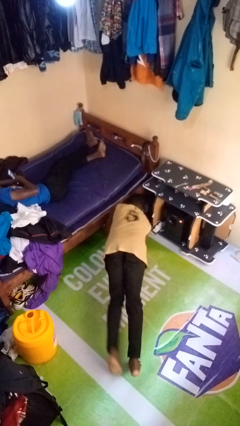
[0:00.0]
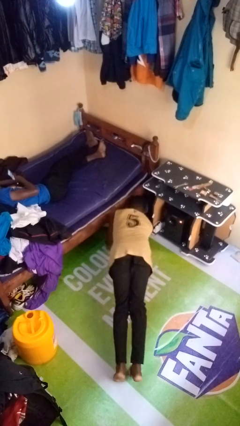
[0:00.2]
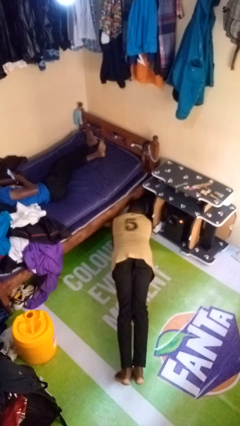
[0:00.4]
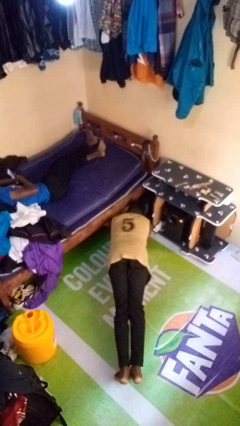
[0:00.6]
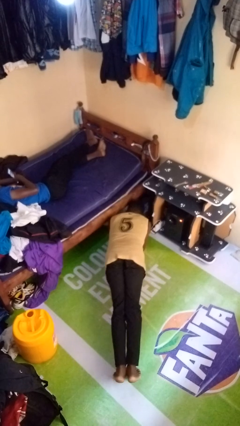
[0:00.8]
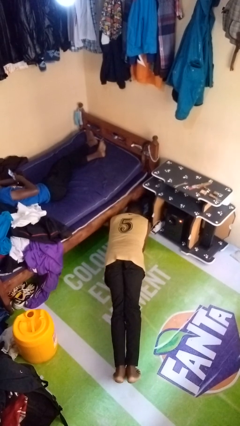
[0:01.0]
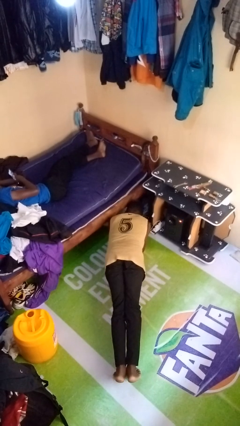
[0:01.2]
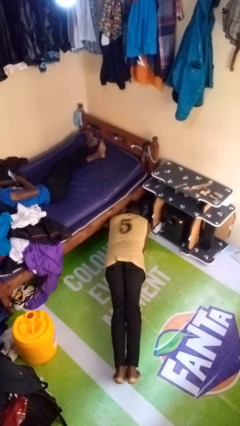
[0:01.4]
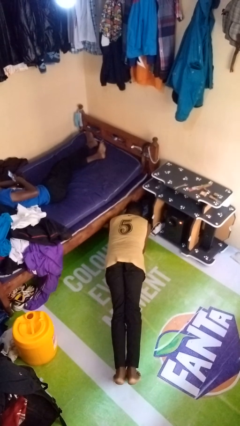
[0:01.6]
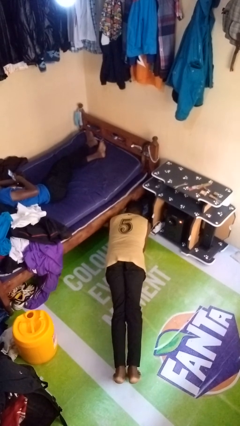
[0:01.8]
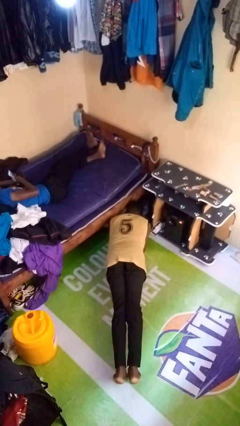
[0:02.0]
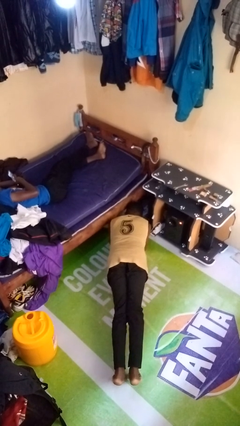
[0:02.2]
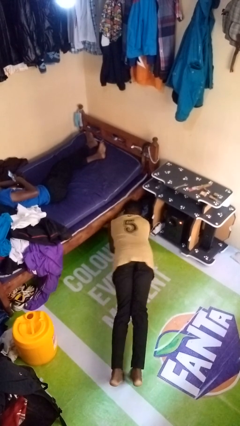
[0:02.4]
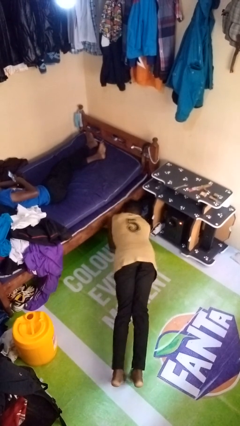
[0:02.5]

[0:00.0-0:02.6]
person exercises with plank

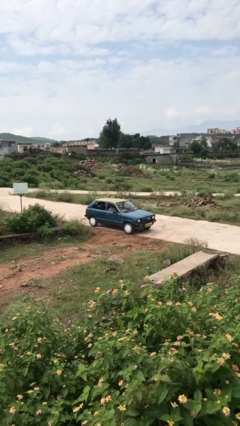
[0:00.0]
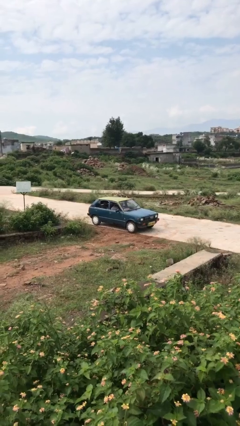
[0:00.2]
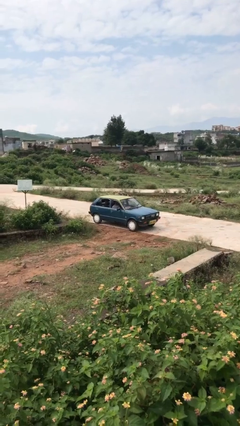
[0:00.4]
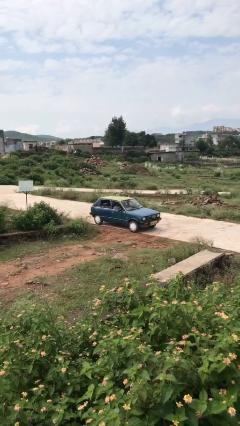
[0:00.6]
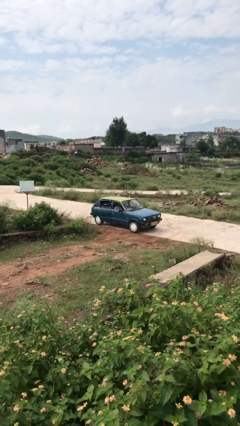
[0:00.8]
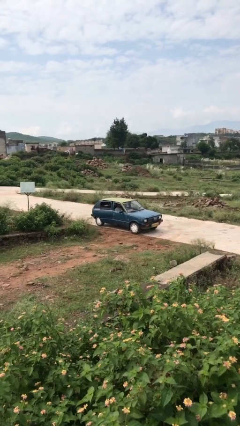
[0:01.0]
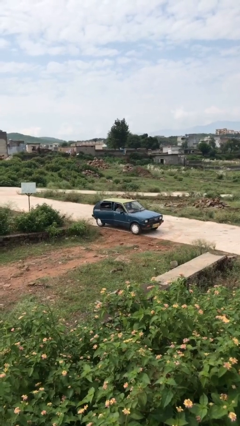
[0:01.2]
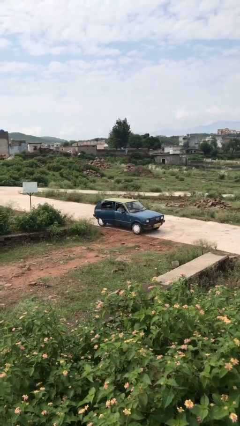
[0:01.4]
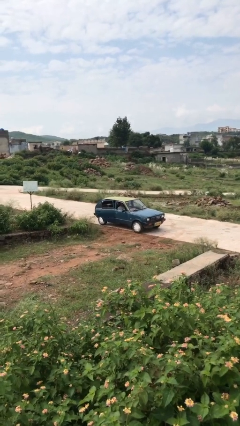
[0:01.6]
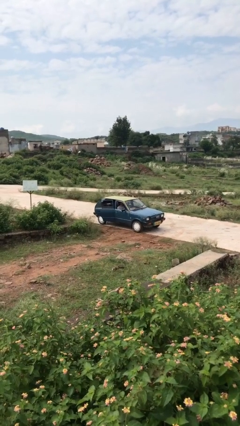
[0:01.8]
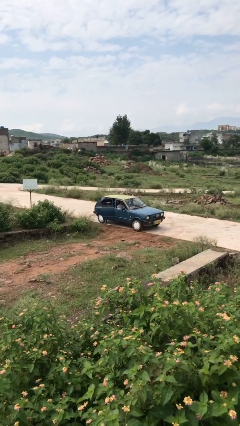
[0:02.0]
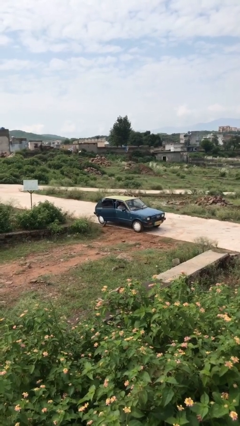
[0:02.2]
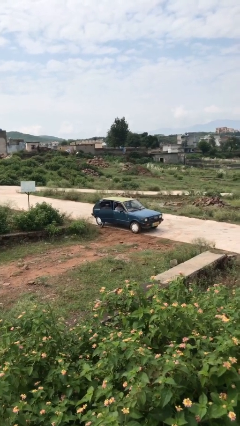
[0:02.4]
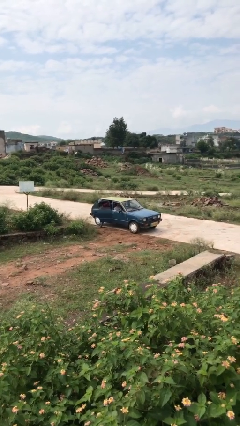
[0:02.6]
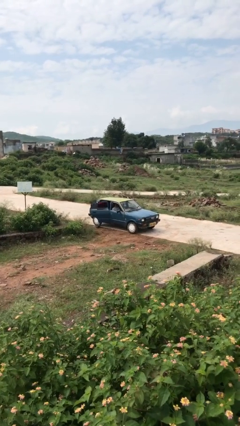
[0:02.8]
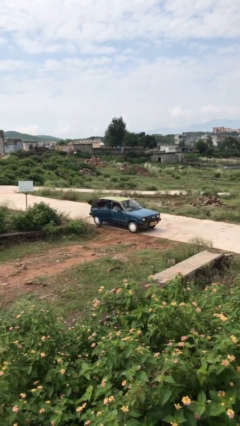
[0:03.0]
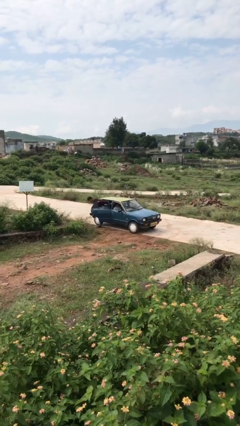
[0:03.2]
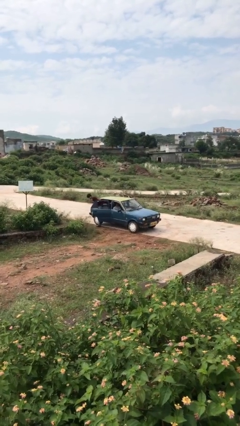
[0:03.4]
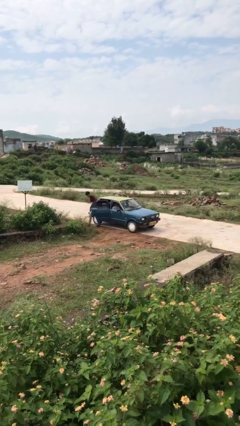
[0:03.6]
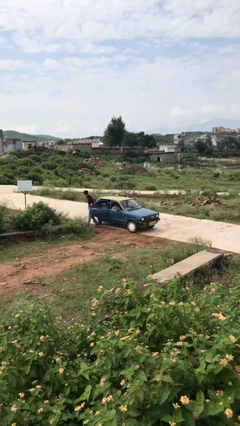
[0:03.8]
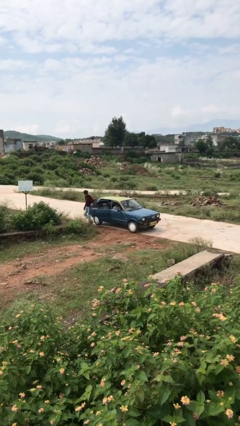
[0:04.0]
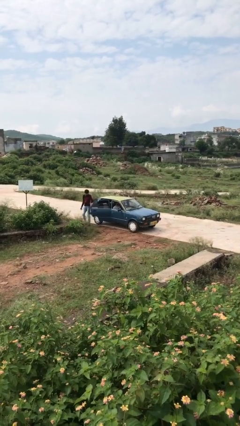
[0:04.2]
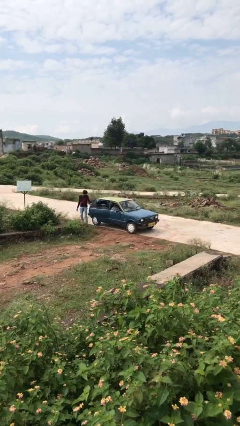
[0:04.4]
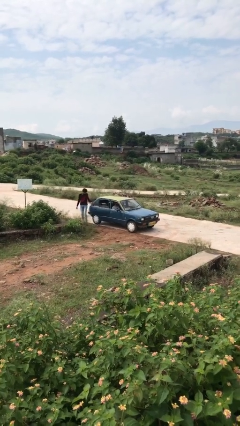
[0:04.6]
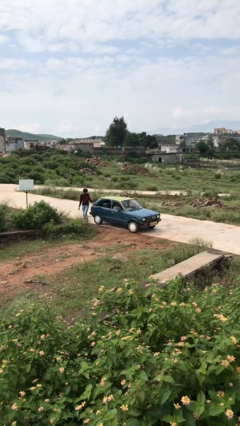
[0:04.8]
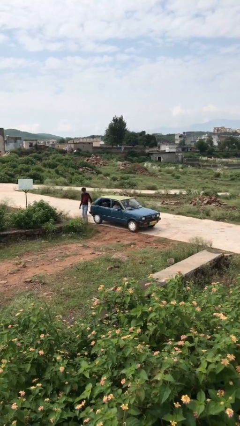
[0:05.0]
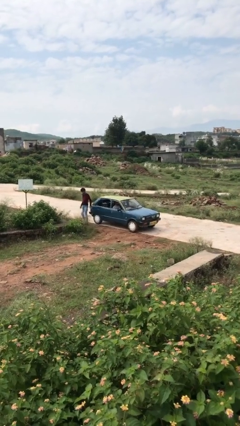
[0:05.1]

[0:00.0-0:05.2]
car drops off person

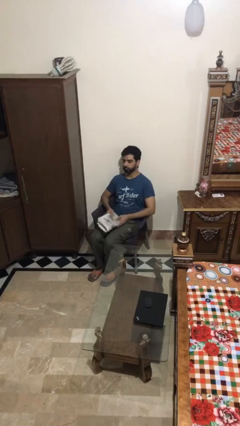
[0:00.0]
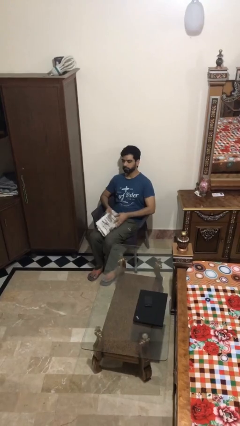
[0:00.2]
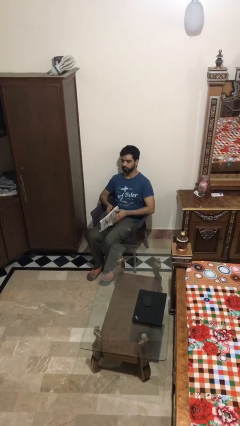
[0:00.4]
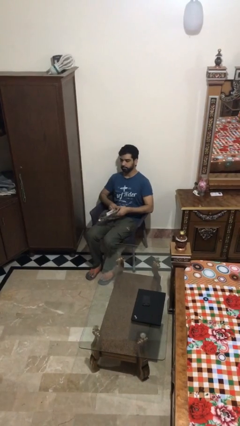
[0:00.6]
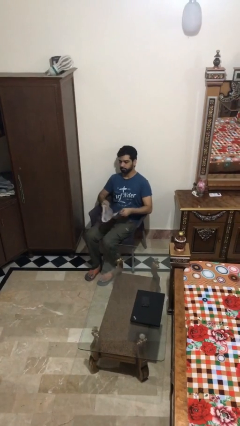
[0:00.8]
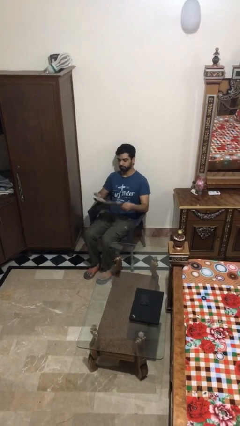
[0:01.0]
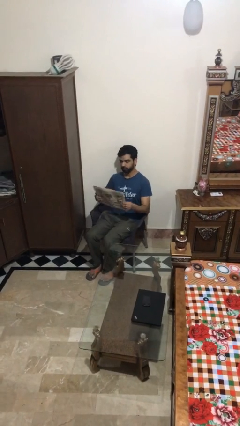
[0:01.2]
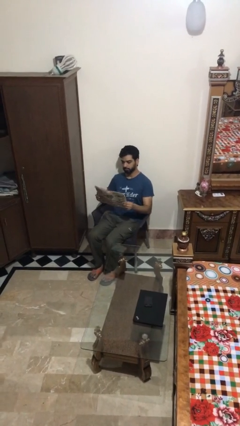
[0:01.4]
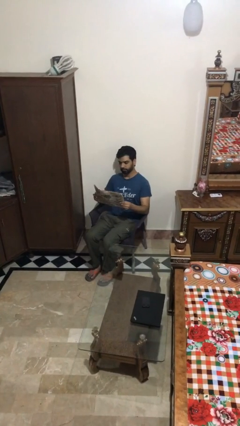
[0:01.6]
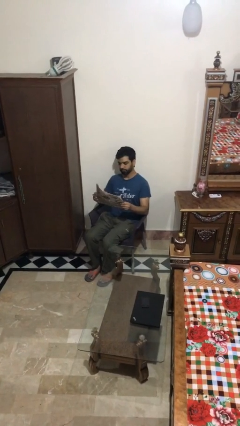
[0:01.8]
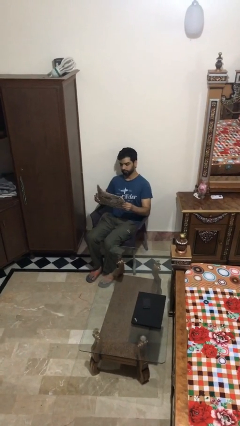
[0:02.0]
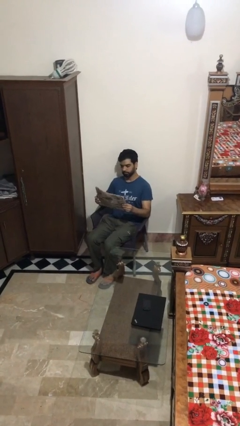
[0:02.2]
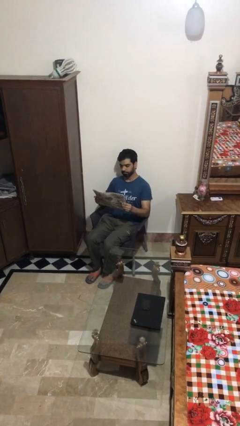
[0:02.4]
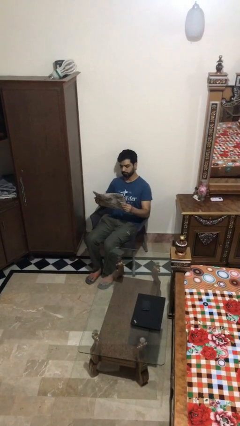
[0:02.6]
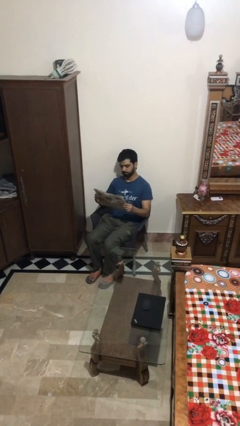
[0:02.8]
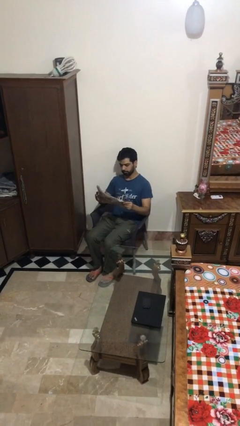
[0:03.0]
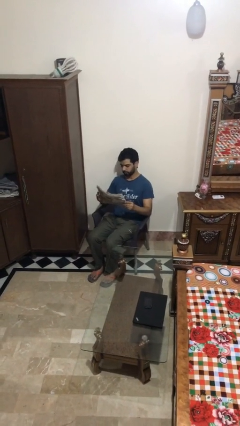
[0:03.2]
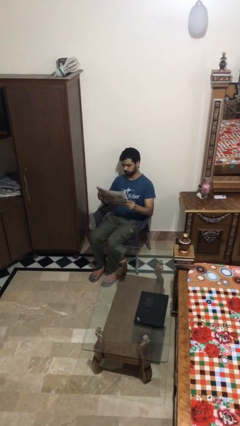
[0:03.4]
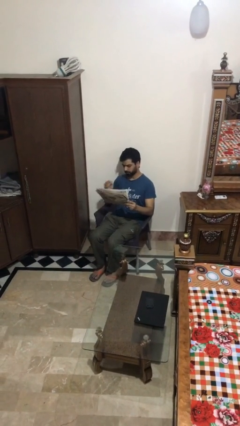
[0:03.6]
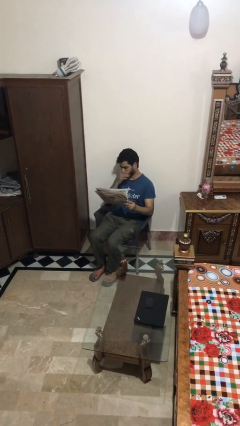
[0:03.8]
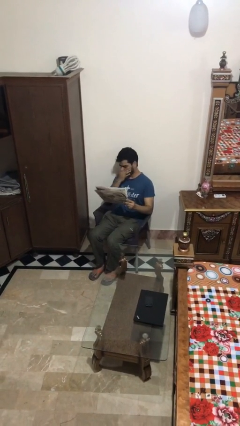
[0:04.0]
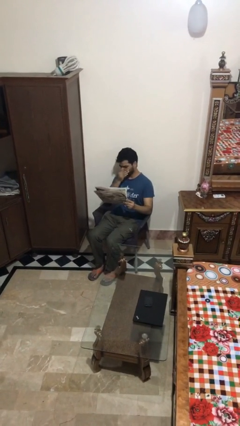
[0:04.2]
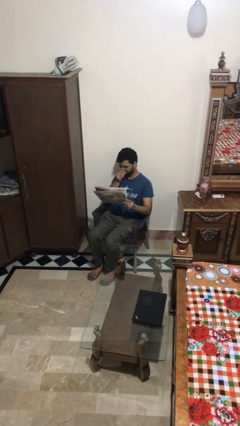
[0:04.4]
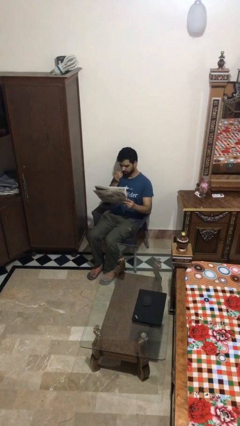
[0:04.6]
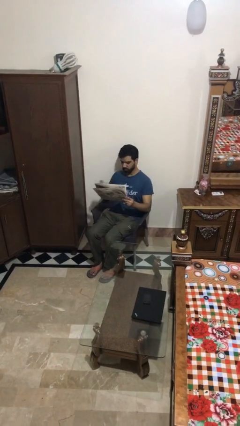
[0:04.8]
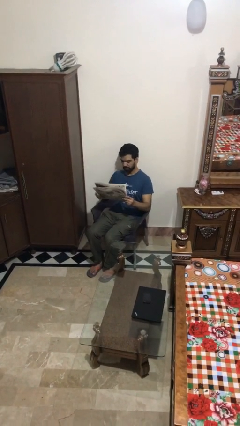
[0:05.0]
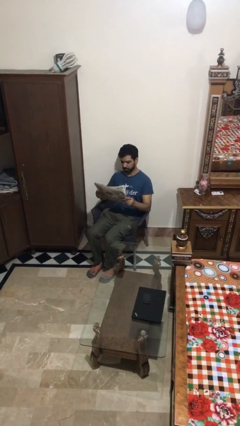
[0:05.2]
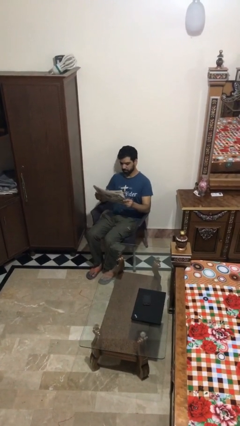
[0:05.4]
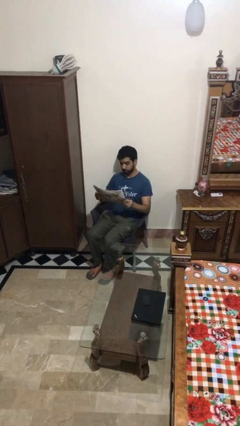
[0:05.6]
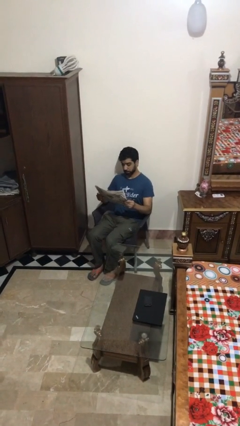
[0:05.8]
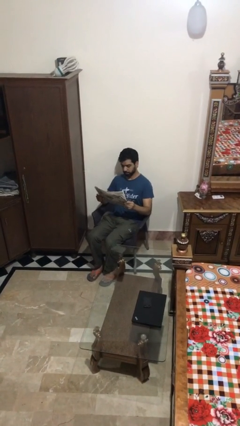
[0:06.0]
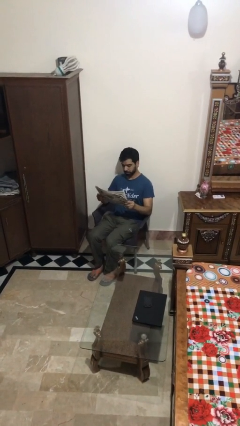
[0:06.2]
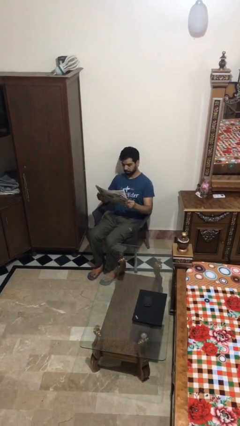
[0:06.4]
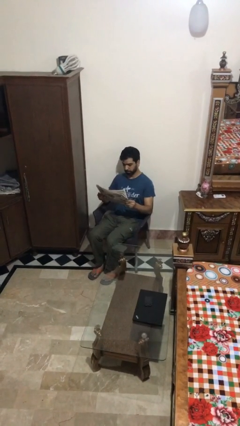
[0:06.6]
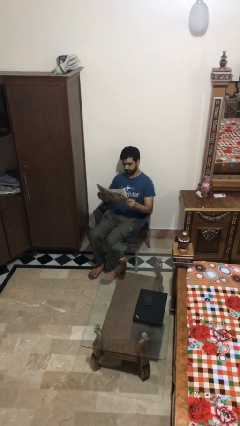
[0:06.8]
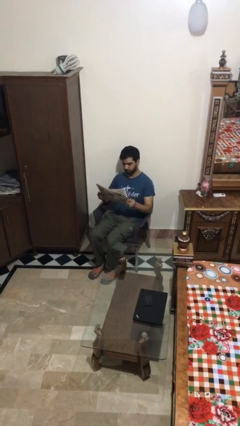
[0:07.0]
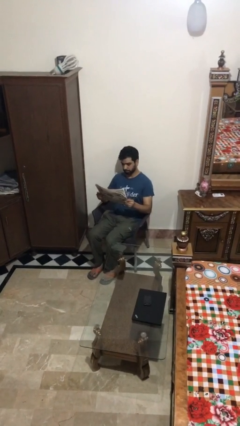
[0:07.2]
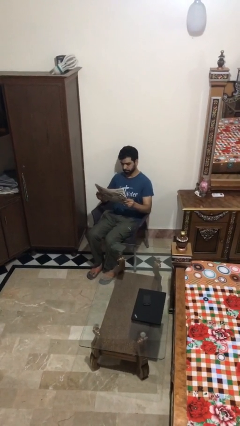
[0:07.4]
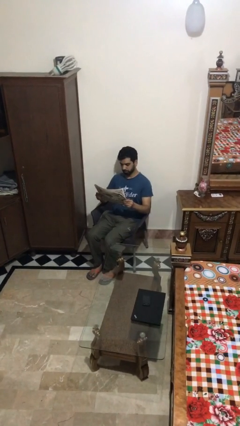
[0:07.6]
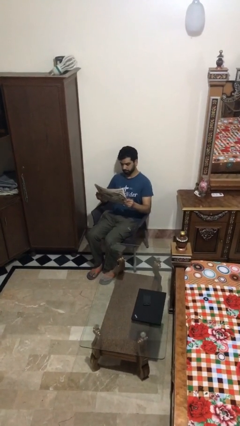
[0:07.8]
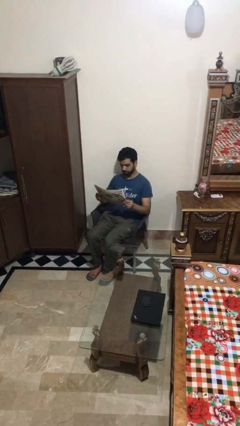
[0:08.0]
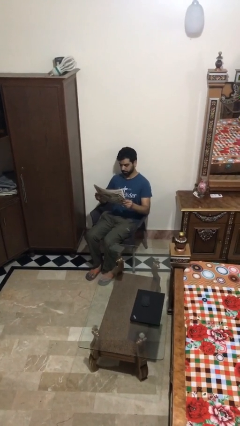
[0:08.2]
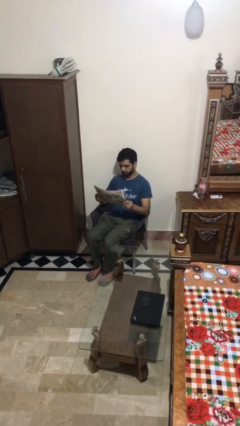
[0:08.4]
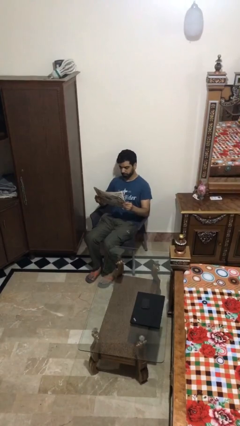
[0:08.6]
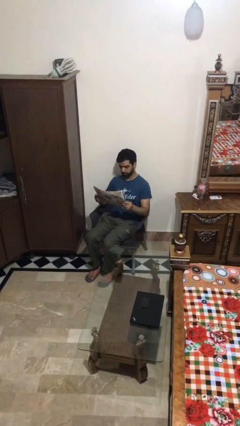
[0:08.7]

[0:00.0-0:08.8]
person reads document

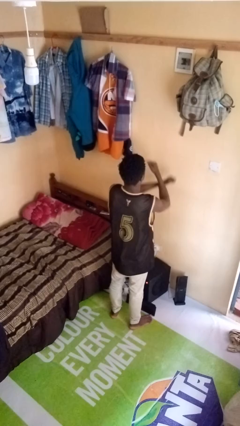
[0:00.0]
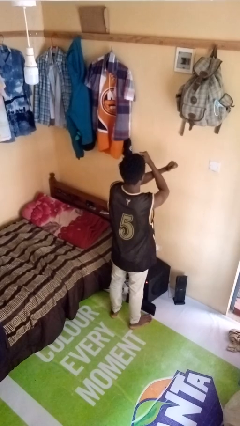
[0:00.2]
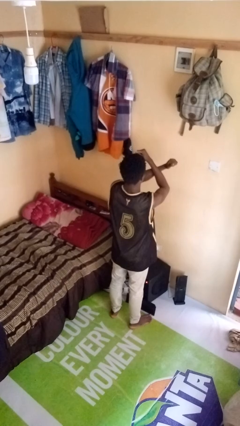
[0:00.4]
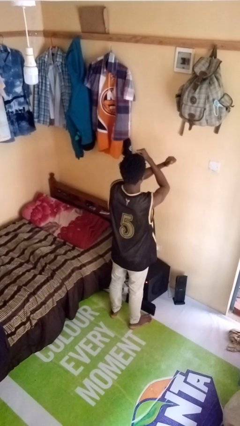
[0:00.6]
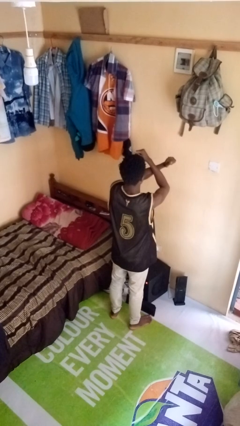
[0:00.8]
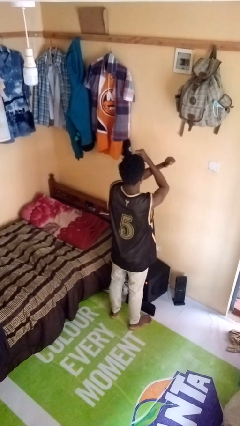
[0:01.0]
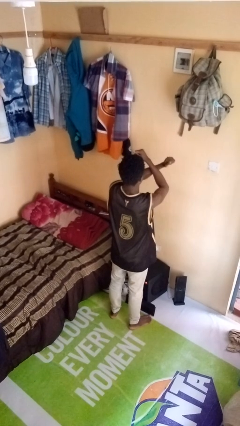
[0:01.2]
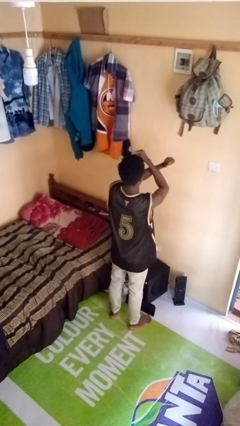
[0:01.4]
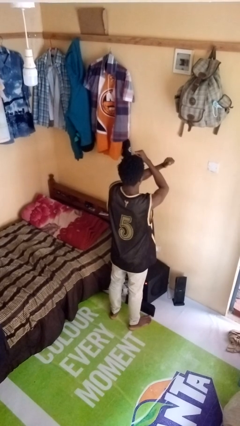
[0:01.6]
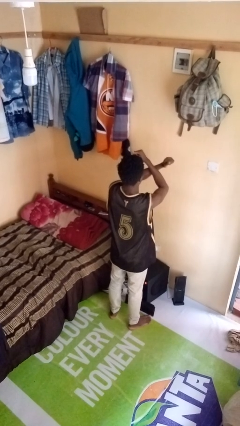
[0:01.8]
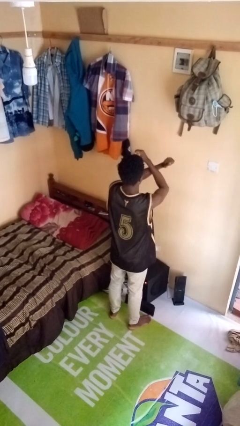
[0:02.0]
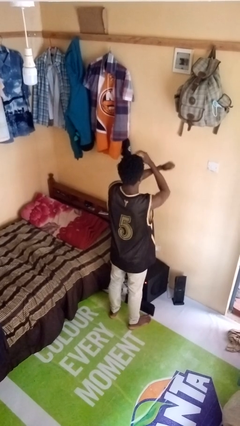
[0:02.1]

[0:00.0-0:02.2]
person gestures arms x
